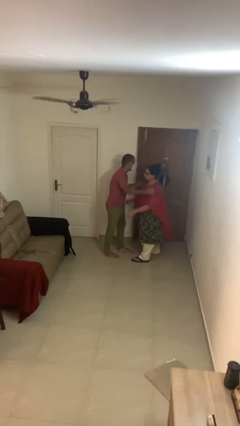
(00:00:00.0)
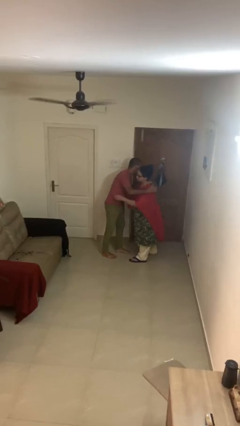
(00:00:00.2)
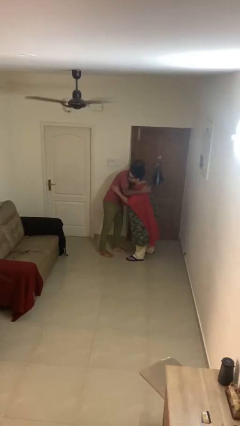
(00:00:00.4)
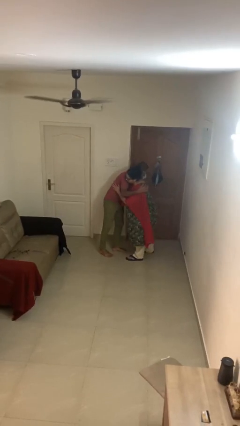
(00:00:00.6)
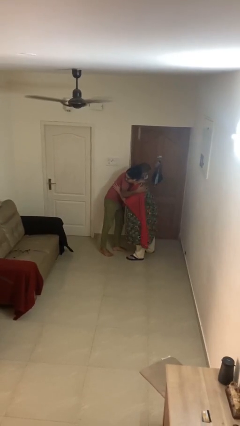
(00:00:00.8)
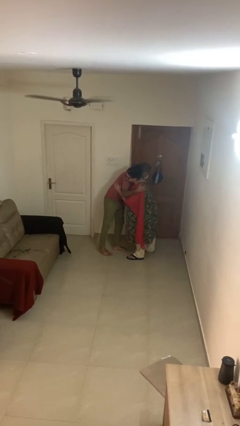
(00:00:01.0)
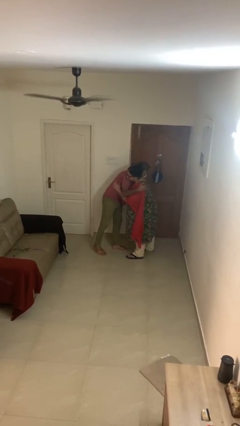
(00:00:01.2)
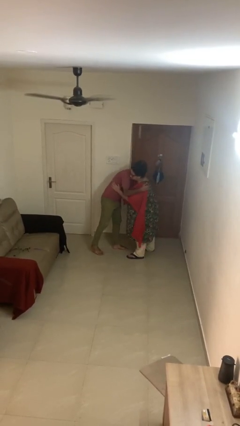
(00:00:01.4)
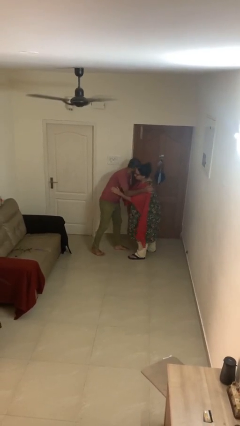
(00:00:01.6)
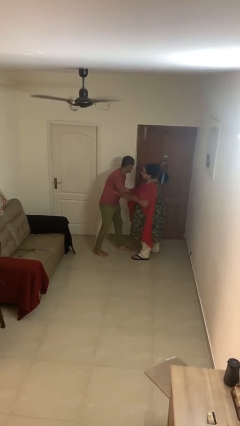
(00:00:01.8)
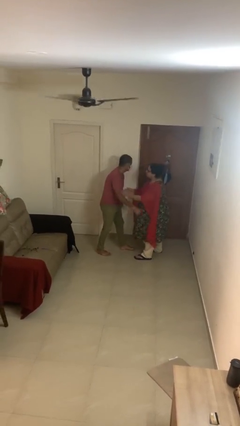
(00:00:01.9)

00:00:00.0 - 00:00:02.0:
person embraces person

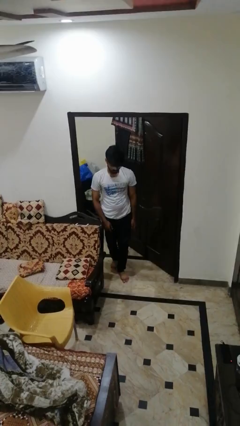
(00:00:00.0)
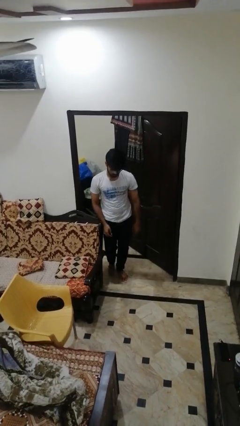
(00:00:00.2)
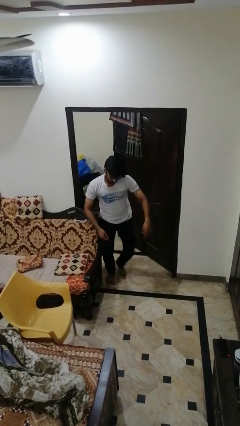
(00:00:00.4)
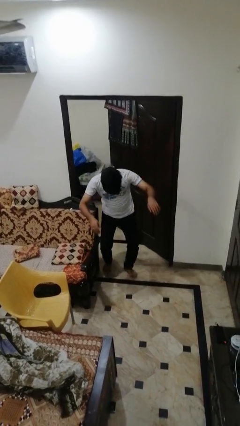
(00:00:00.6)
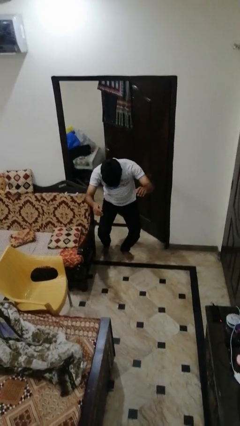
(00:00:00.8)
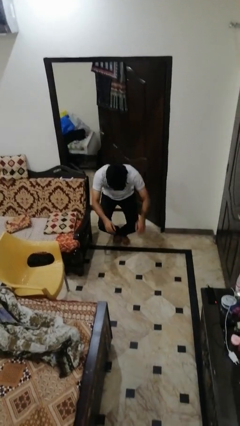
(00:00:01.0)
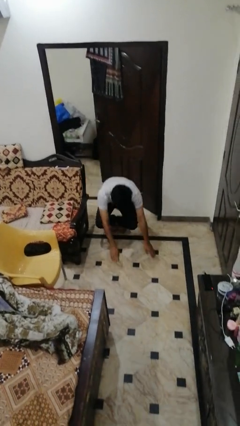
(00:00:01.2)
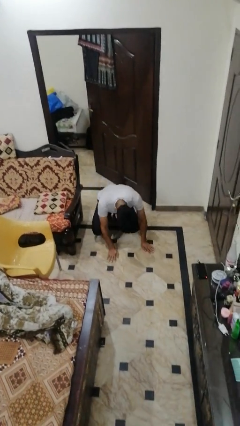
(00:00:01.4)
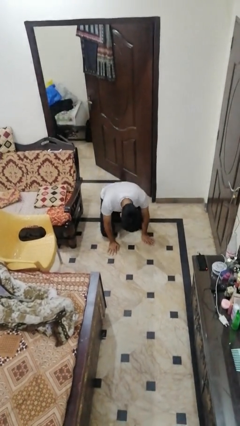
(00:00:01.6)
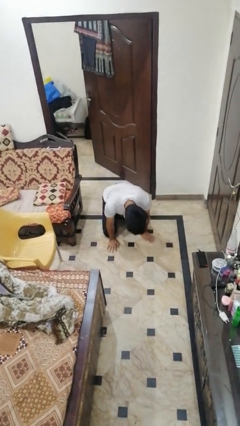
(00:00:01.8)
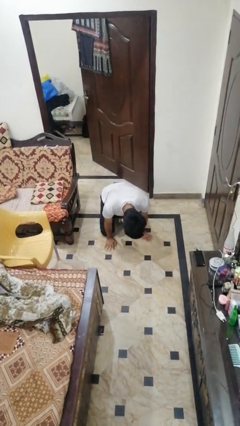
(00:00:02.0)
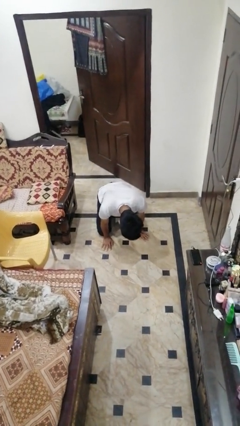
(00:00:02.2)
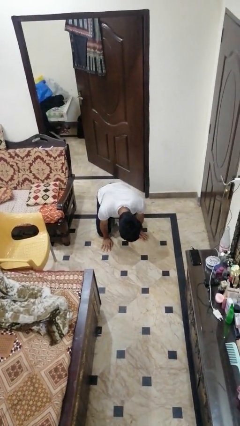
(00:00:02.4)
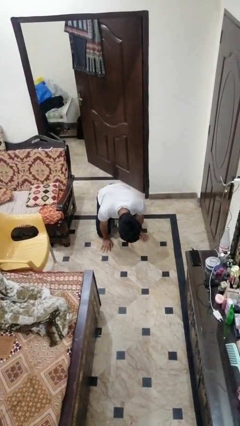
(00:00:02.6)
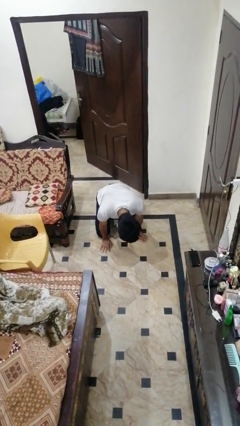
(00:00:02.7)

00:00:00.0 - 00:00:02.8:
person trips on object on floor

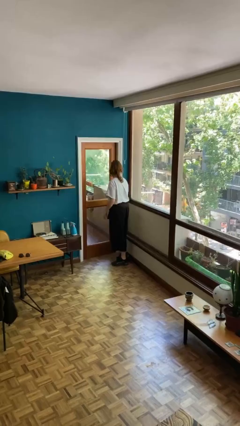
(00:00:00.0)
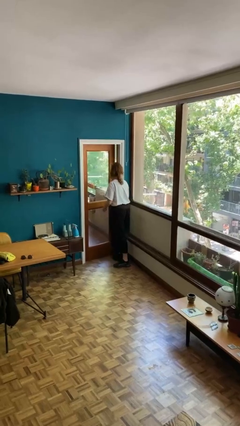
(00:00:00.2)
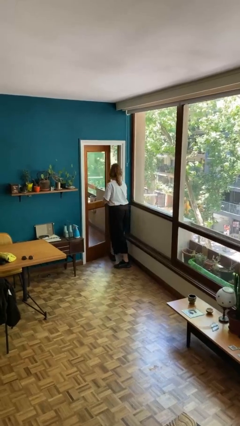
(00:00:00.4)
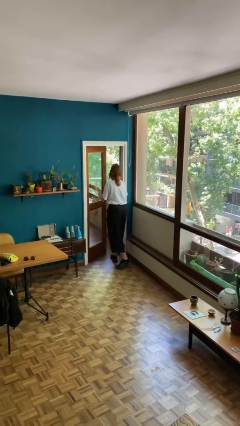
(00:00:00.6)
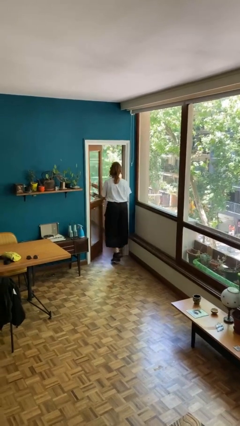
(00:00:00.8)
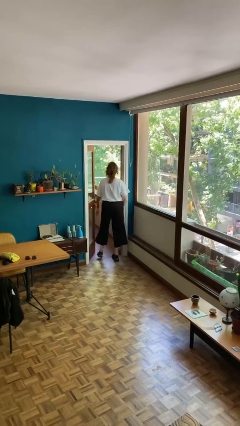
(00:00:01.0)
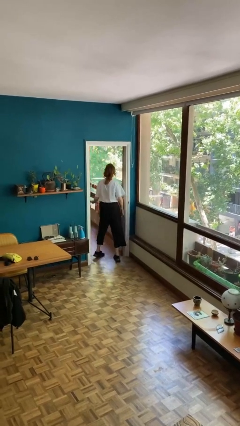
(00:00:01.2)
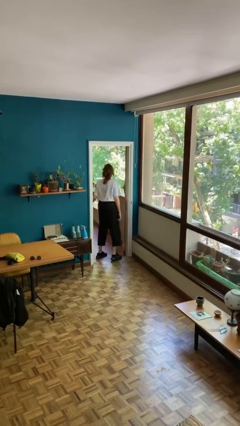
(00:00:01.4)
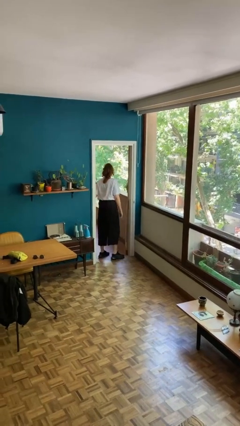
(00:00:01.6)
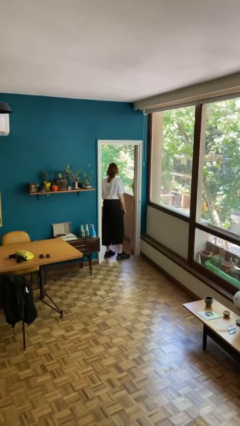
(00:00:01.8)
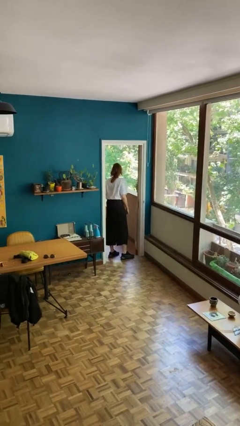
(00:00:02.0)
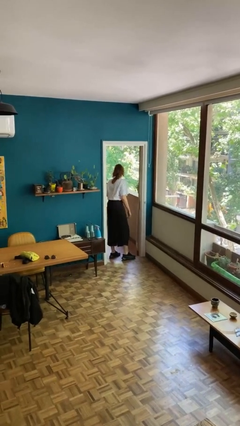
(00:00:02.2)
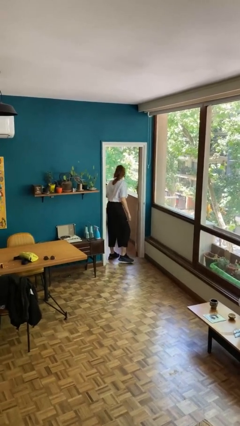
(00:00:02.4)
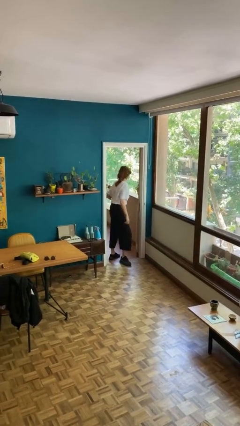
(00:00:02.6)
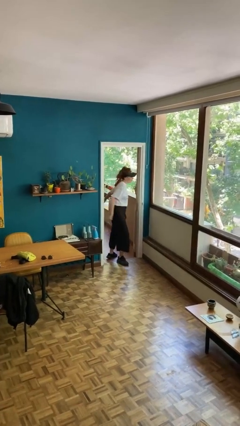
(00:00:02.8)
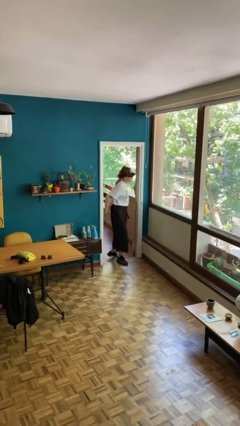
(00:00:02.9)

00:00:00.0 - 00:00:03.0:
person opens facility door

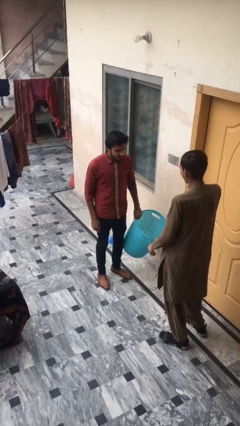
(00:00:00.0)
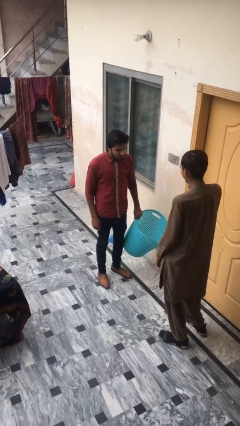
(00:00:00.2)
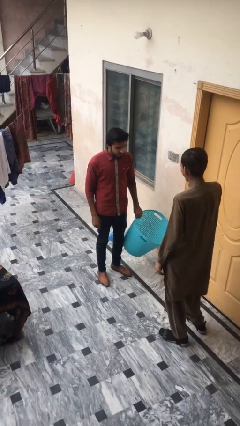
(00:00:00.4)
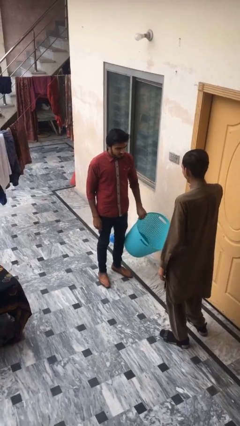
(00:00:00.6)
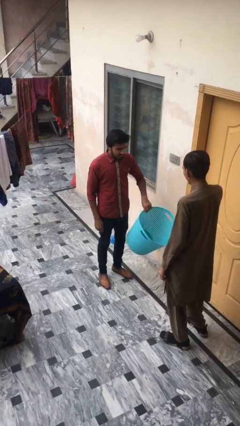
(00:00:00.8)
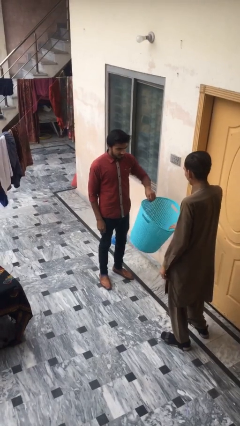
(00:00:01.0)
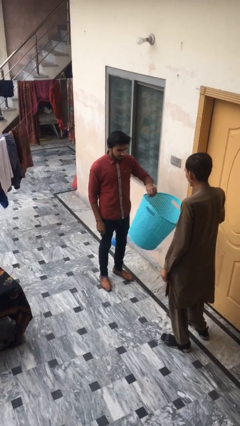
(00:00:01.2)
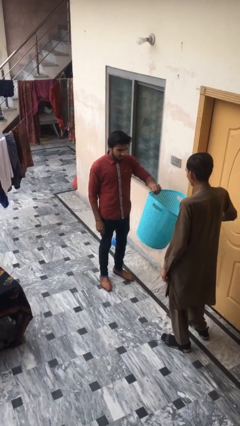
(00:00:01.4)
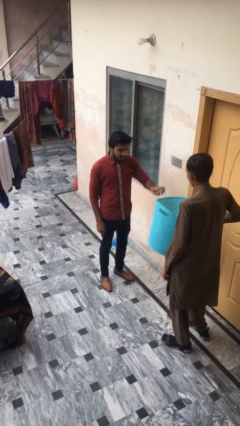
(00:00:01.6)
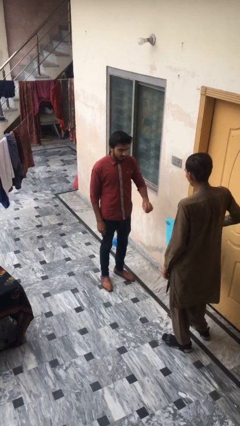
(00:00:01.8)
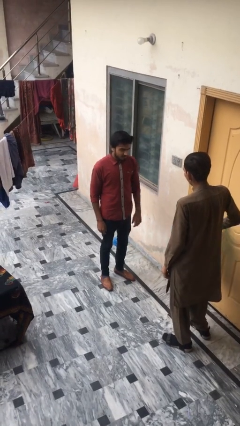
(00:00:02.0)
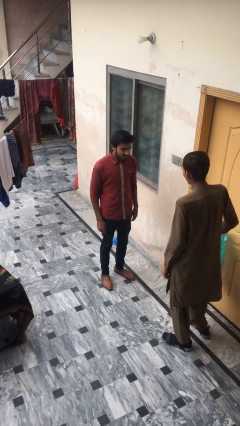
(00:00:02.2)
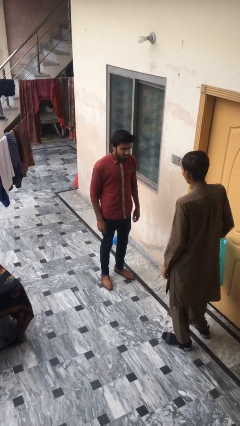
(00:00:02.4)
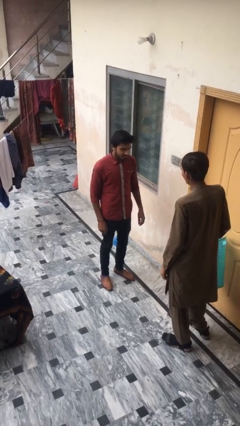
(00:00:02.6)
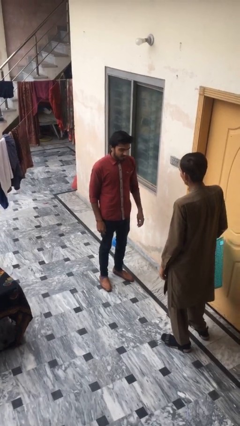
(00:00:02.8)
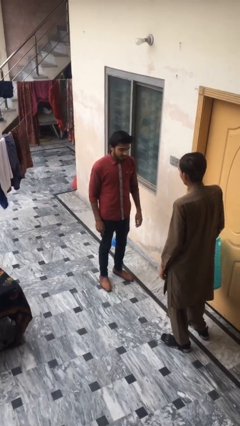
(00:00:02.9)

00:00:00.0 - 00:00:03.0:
person transfers object to person

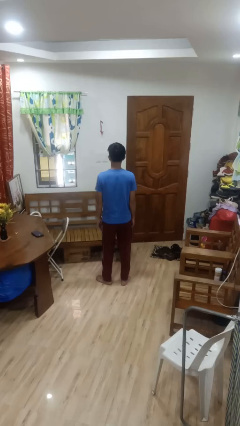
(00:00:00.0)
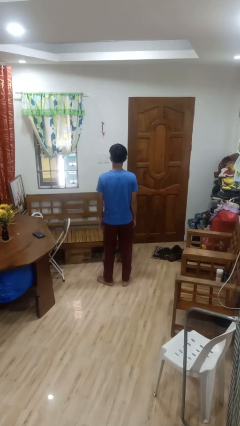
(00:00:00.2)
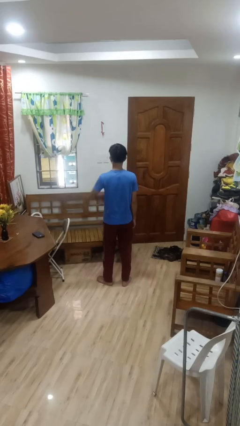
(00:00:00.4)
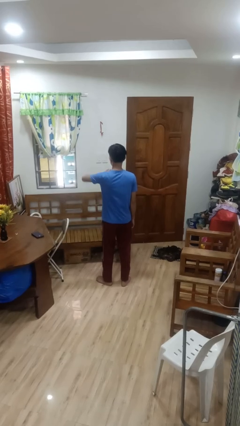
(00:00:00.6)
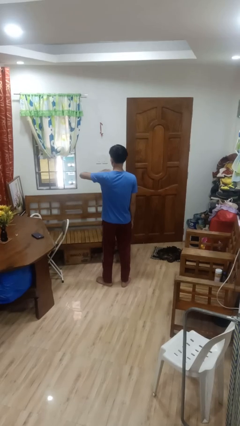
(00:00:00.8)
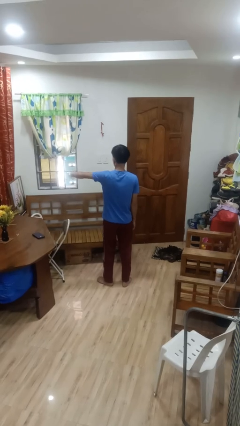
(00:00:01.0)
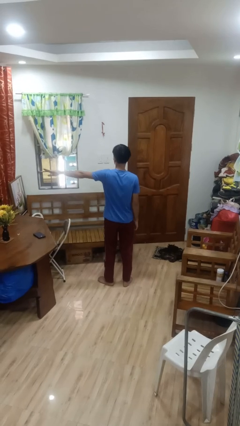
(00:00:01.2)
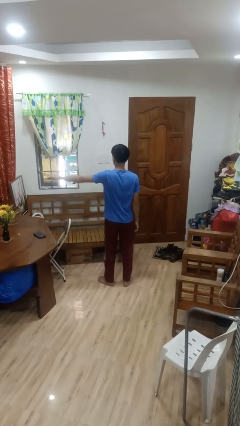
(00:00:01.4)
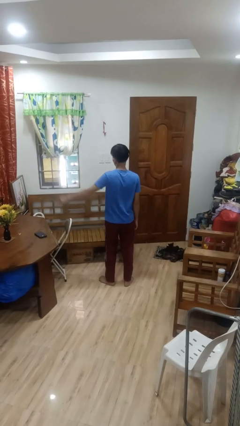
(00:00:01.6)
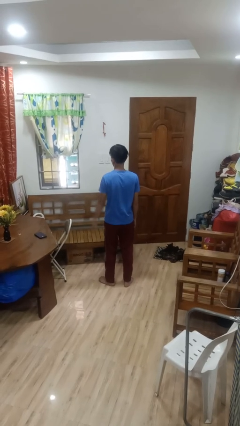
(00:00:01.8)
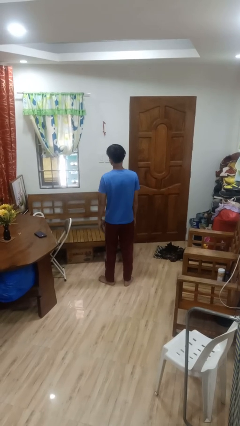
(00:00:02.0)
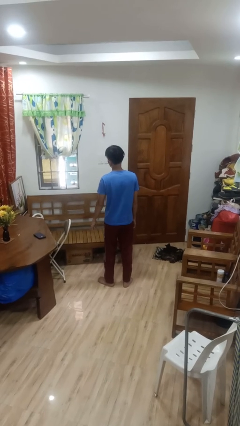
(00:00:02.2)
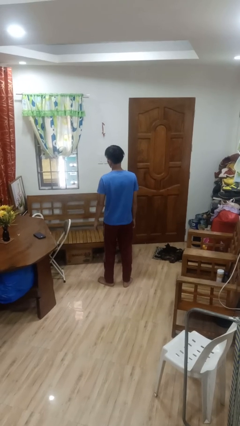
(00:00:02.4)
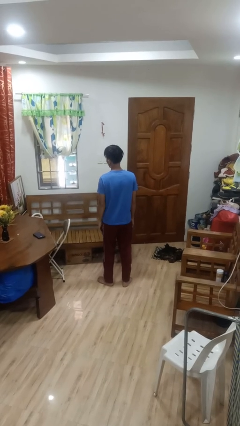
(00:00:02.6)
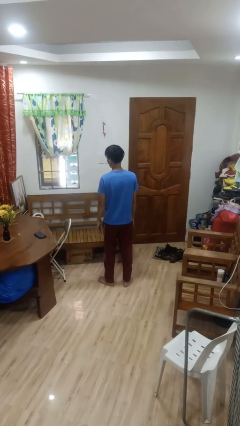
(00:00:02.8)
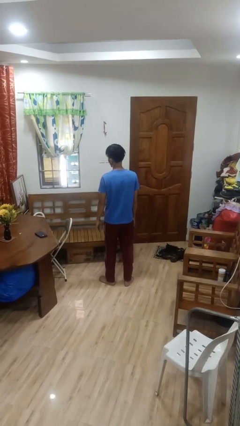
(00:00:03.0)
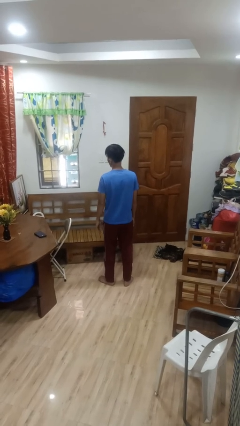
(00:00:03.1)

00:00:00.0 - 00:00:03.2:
person gestures swipe left

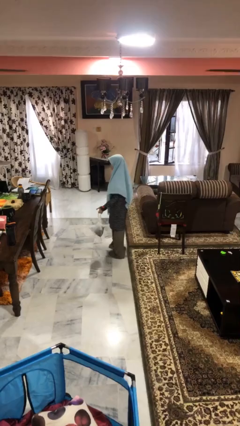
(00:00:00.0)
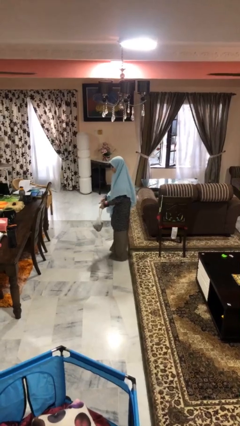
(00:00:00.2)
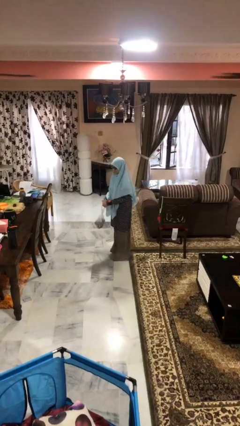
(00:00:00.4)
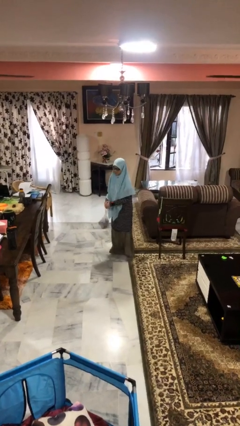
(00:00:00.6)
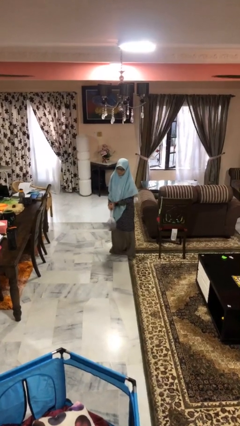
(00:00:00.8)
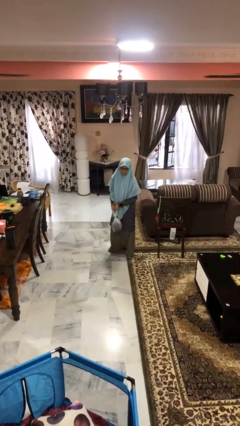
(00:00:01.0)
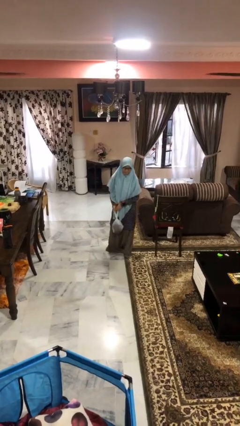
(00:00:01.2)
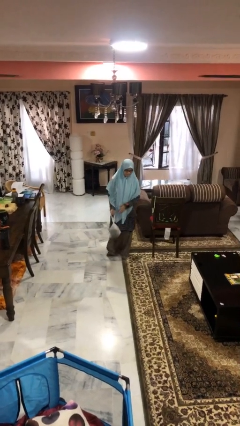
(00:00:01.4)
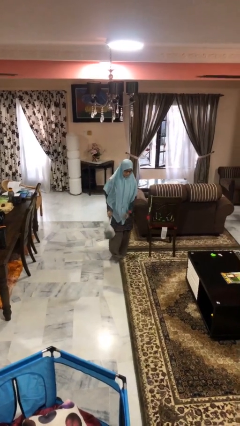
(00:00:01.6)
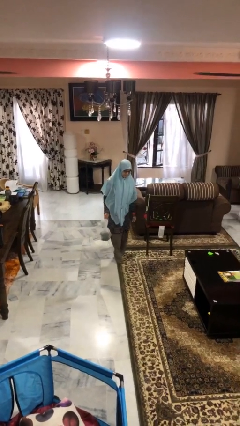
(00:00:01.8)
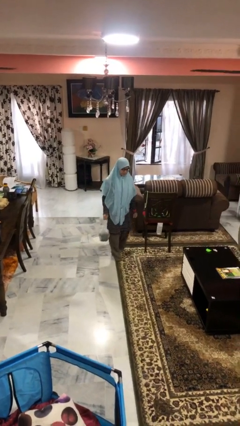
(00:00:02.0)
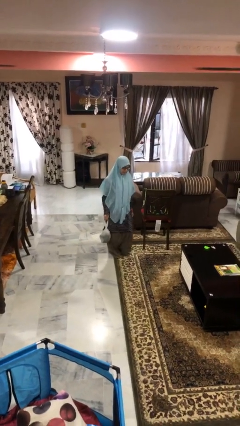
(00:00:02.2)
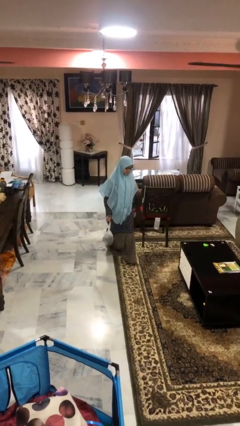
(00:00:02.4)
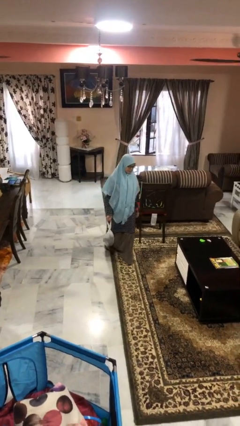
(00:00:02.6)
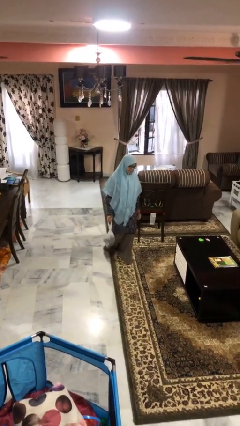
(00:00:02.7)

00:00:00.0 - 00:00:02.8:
person carries groceries

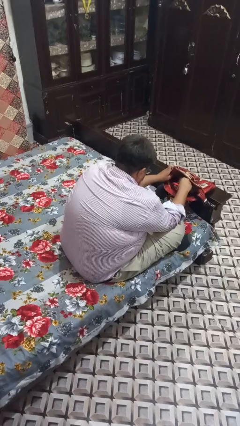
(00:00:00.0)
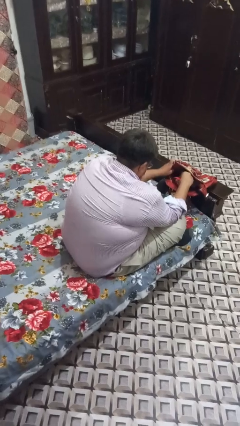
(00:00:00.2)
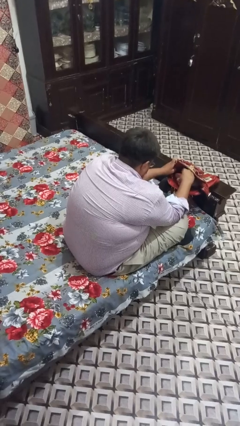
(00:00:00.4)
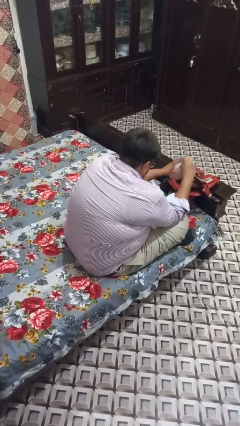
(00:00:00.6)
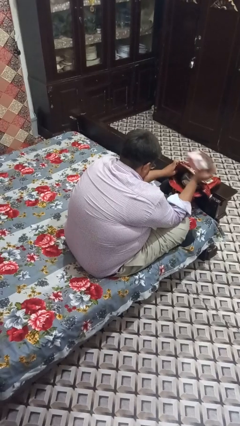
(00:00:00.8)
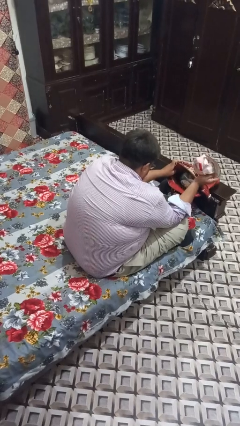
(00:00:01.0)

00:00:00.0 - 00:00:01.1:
person takes object from purse
